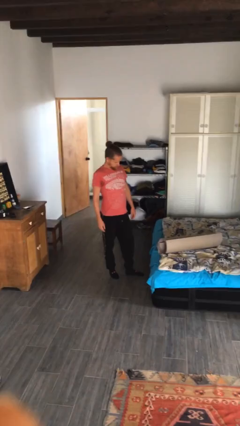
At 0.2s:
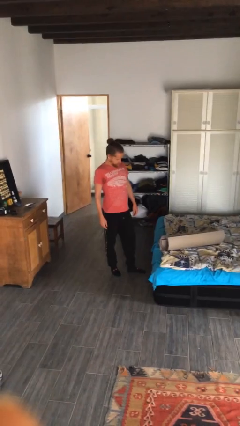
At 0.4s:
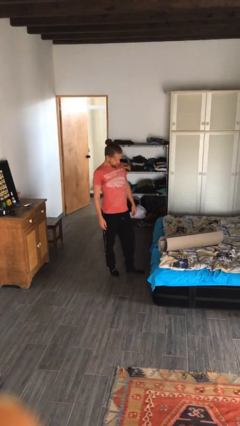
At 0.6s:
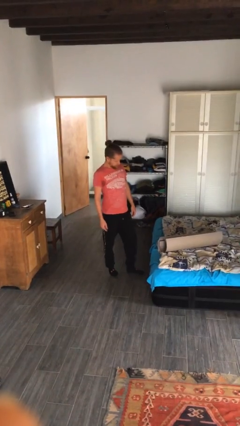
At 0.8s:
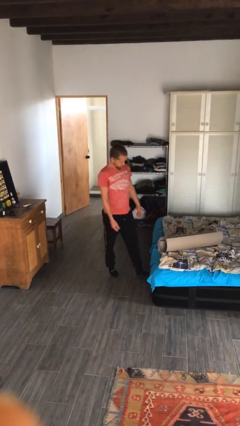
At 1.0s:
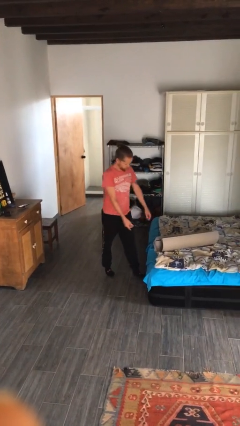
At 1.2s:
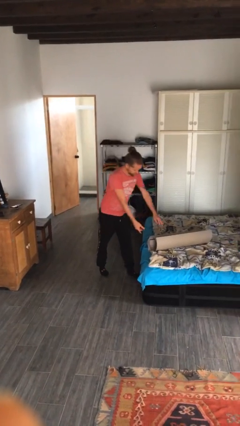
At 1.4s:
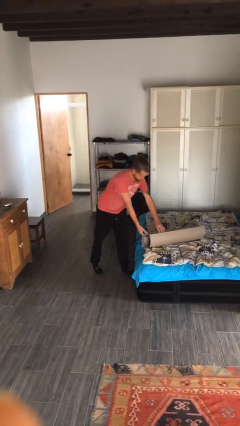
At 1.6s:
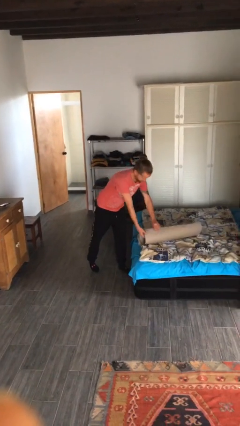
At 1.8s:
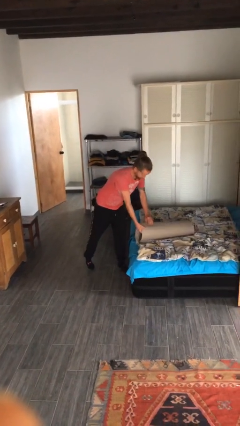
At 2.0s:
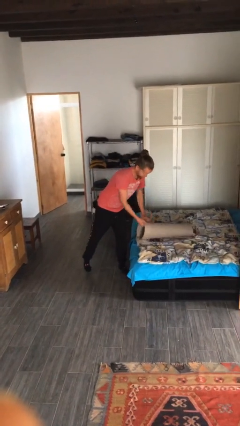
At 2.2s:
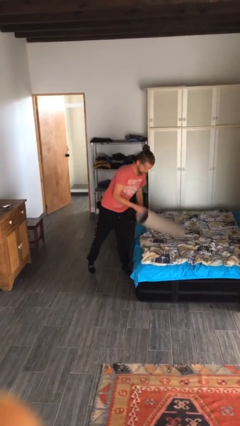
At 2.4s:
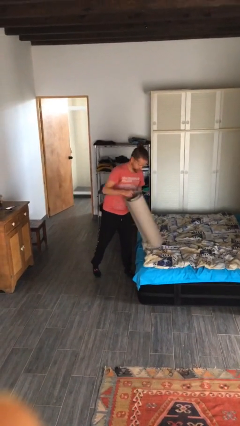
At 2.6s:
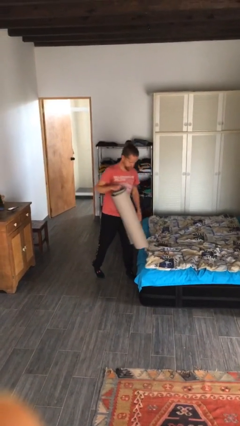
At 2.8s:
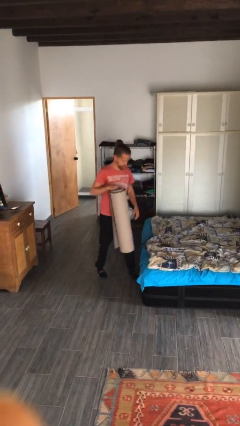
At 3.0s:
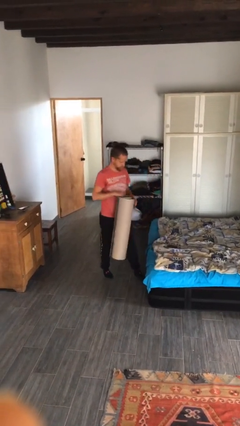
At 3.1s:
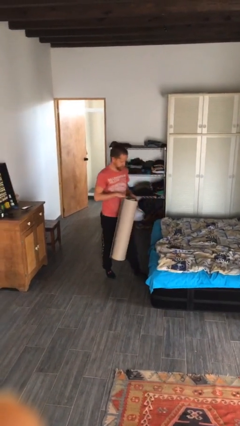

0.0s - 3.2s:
person picks up object from bed

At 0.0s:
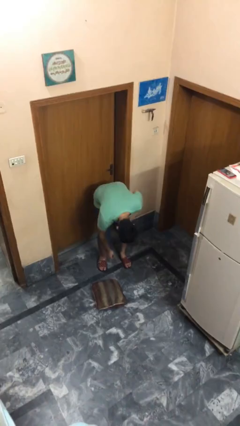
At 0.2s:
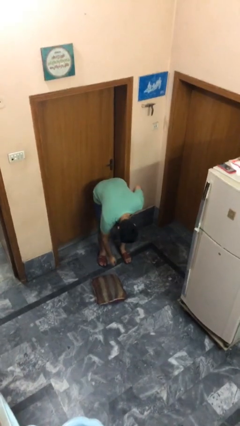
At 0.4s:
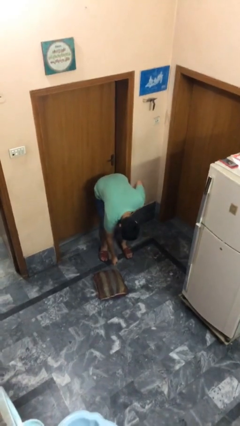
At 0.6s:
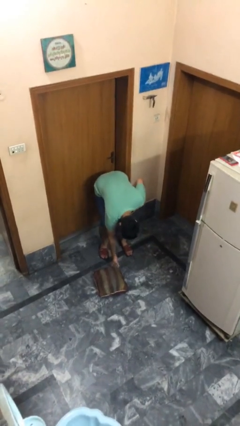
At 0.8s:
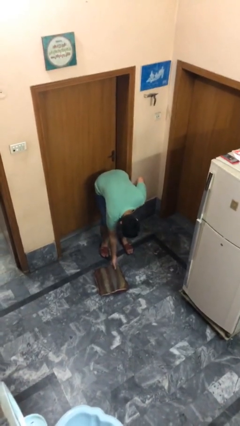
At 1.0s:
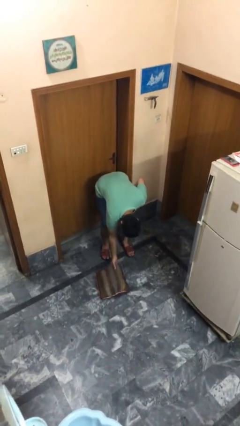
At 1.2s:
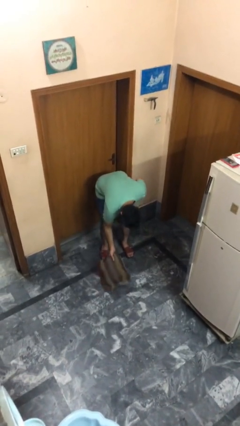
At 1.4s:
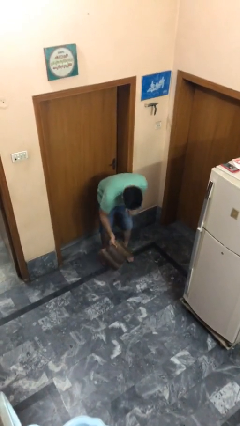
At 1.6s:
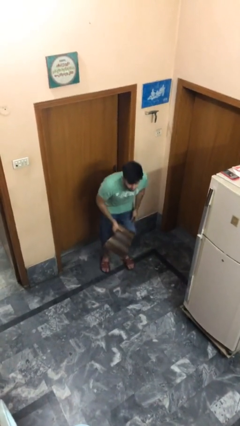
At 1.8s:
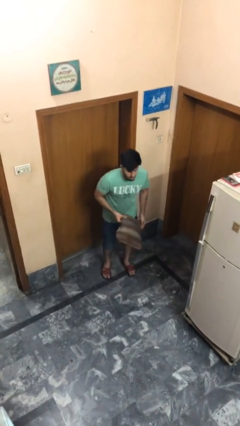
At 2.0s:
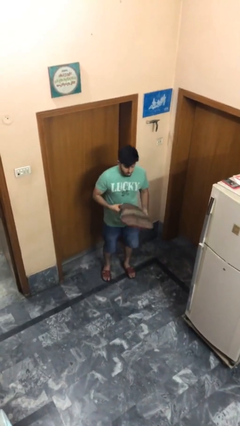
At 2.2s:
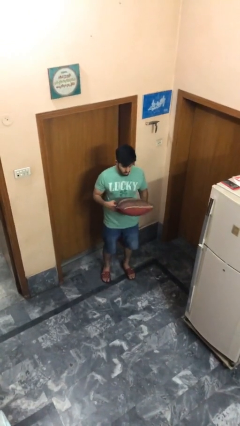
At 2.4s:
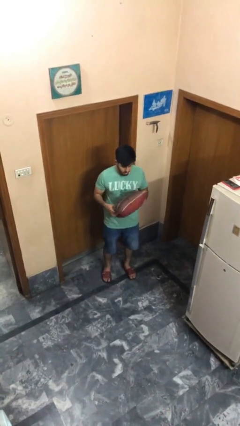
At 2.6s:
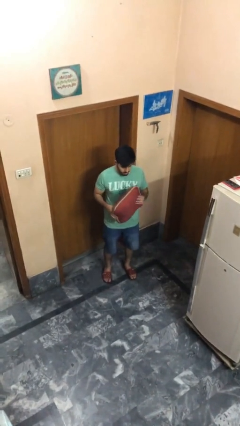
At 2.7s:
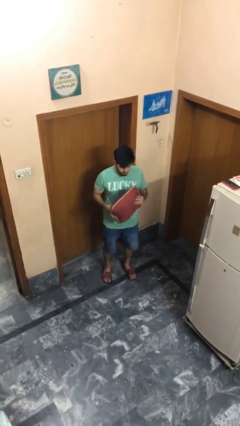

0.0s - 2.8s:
person picks up object from floor

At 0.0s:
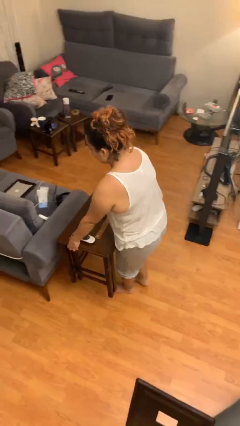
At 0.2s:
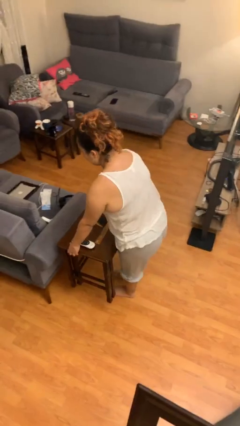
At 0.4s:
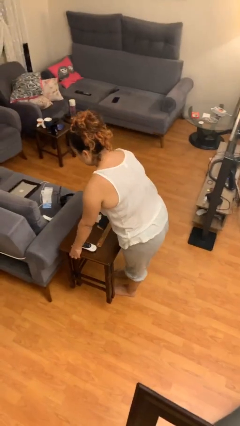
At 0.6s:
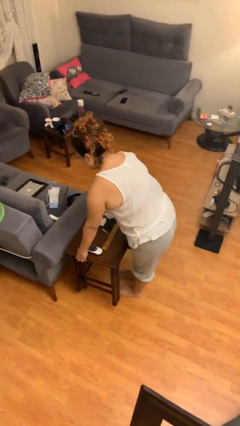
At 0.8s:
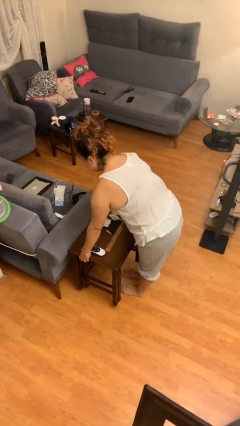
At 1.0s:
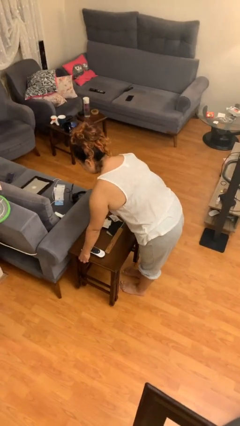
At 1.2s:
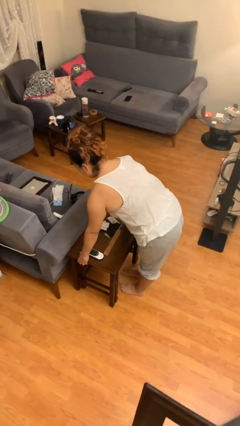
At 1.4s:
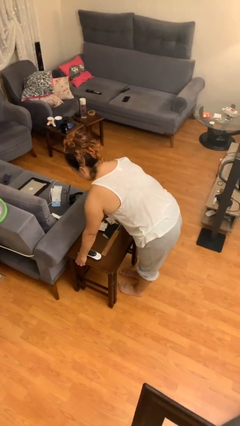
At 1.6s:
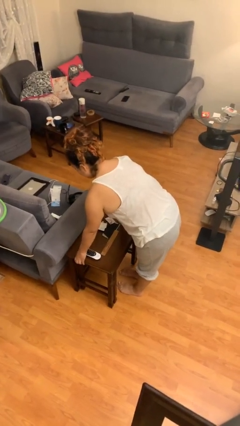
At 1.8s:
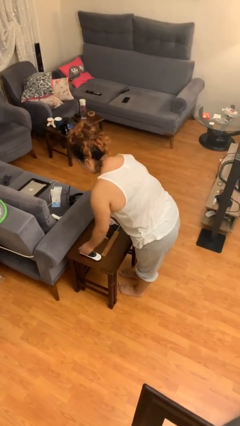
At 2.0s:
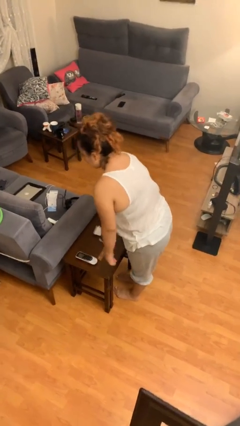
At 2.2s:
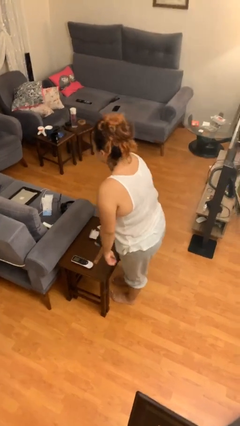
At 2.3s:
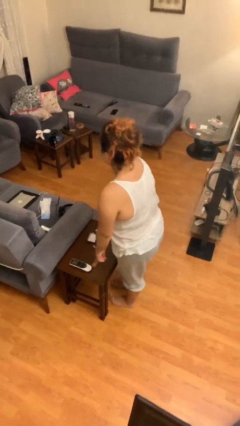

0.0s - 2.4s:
person puts down object on floor

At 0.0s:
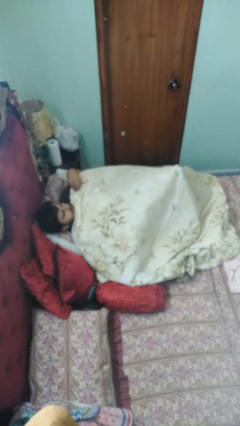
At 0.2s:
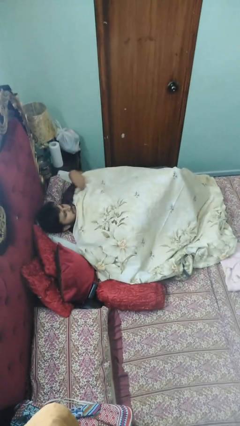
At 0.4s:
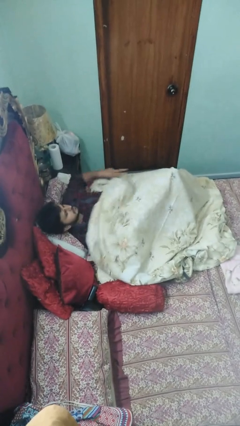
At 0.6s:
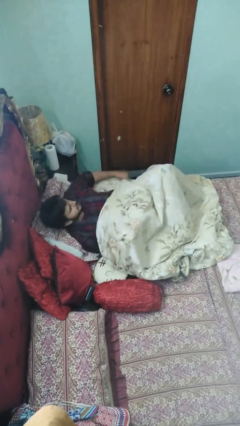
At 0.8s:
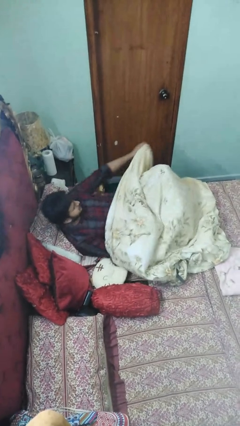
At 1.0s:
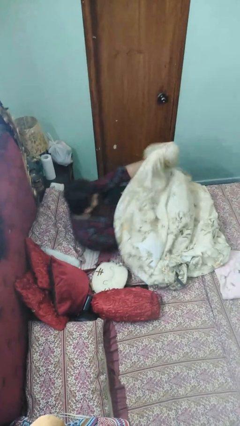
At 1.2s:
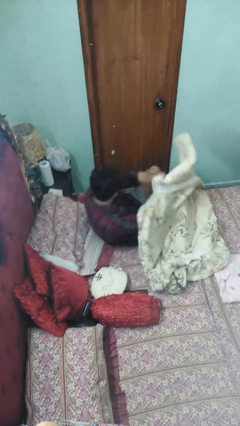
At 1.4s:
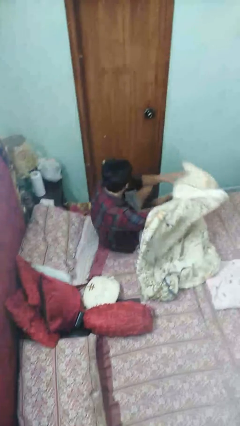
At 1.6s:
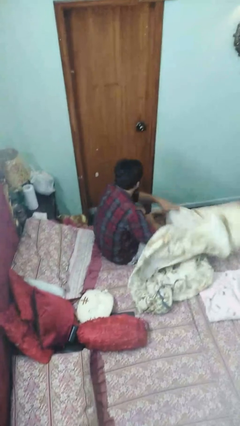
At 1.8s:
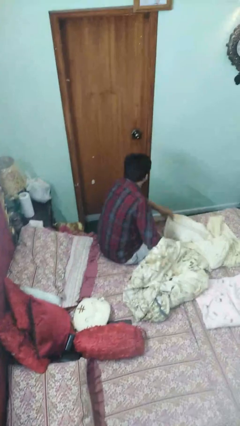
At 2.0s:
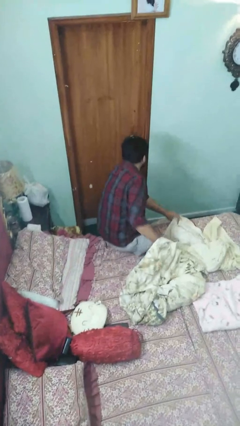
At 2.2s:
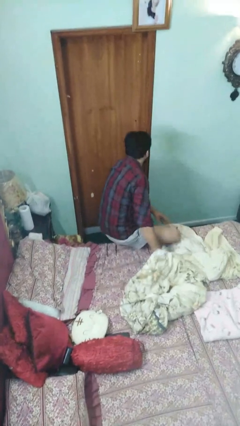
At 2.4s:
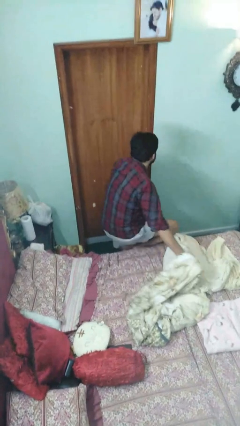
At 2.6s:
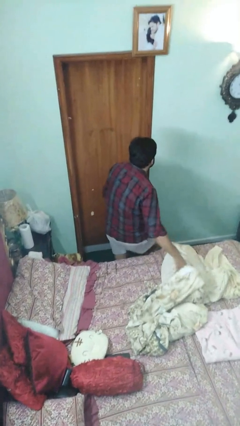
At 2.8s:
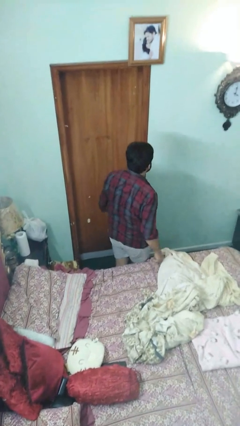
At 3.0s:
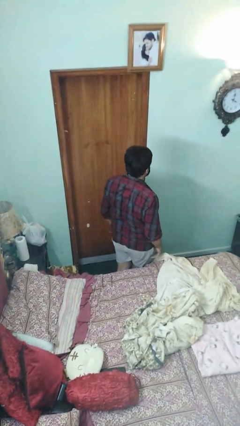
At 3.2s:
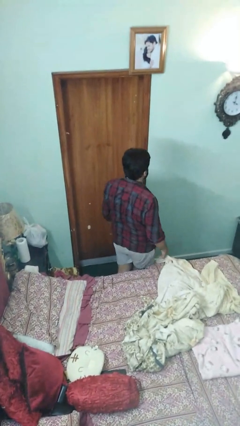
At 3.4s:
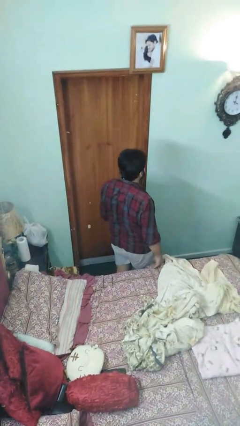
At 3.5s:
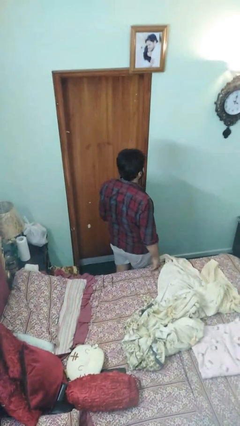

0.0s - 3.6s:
person uncovers with bedsheets

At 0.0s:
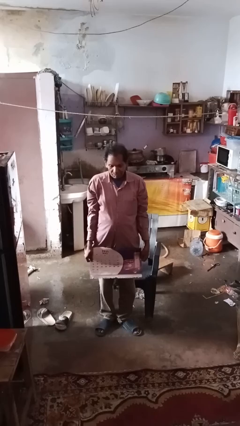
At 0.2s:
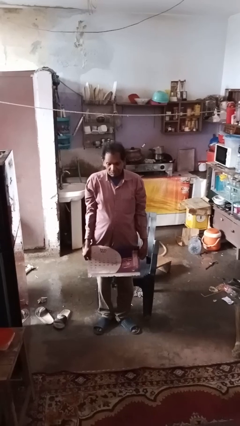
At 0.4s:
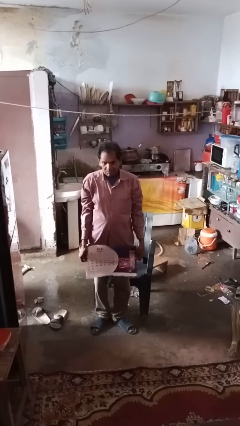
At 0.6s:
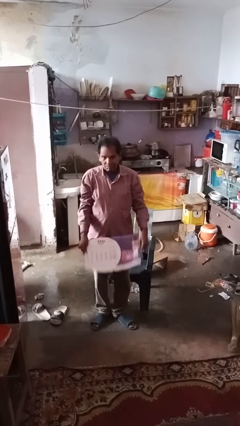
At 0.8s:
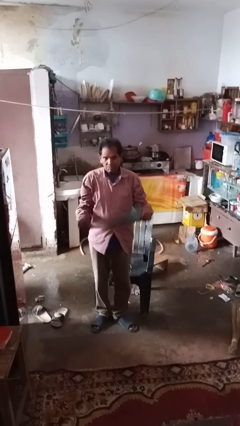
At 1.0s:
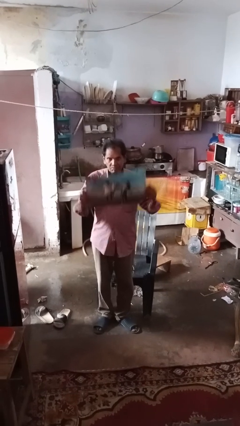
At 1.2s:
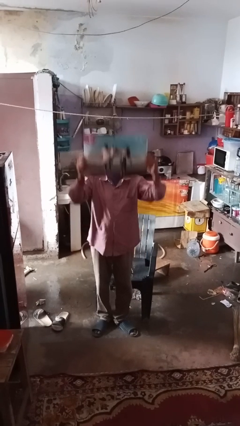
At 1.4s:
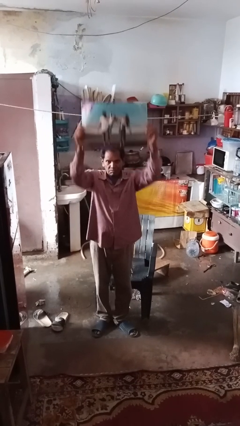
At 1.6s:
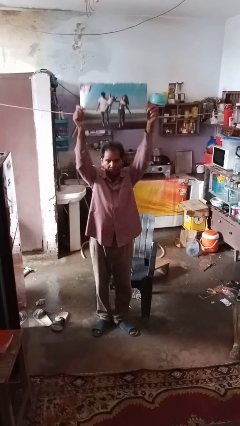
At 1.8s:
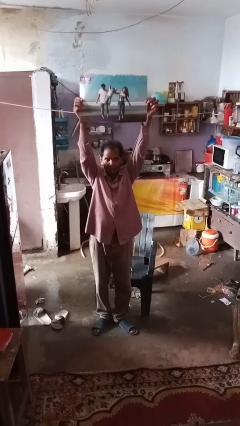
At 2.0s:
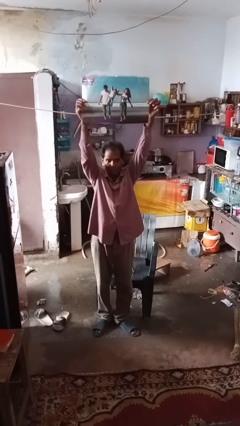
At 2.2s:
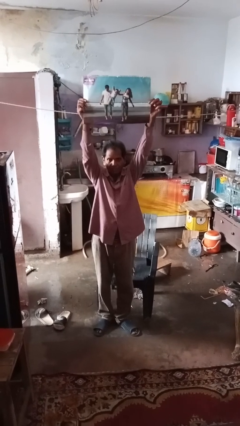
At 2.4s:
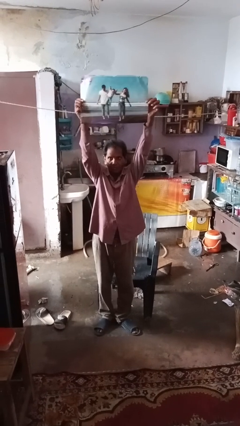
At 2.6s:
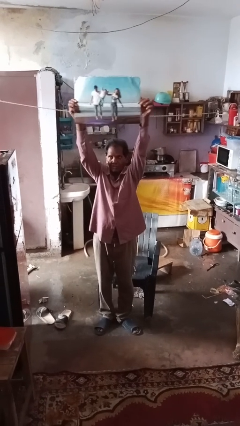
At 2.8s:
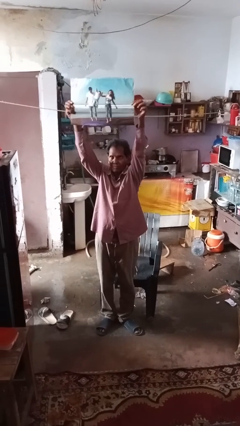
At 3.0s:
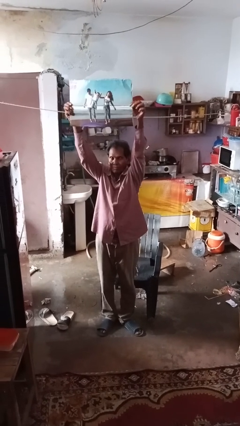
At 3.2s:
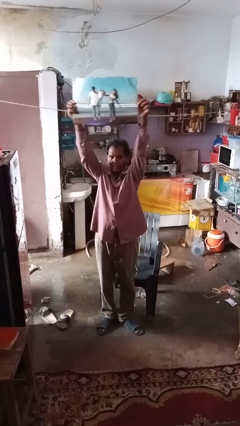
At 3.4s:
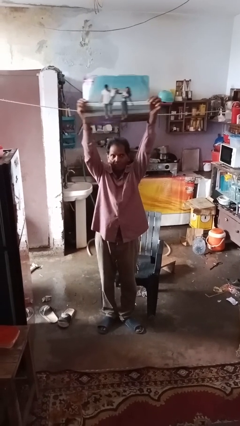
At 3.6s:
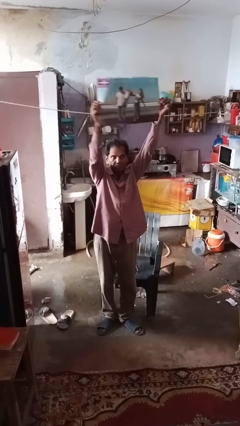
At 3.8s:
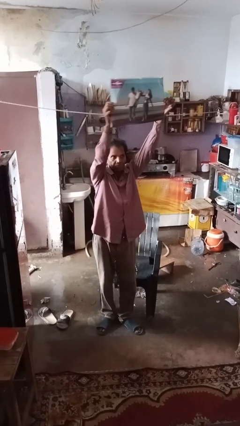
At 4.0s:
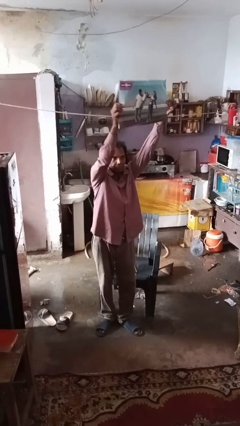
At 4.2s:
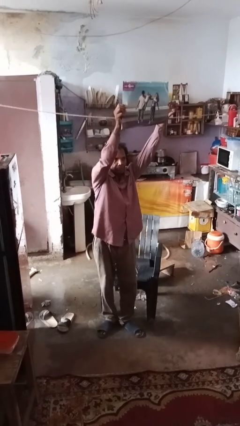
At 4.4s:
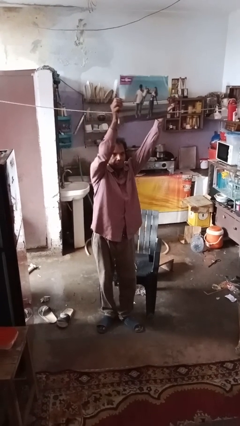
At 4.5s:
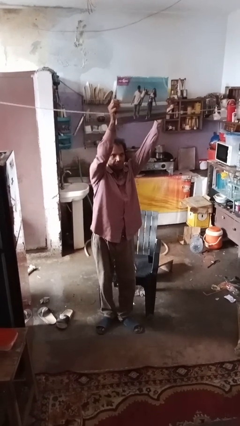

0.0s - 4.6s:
person holds object above head

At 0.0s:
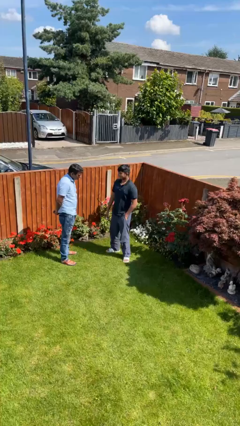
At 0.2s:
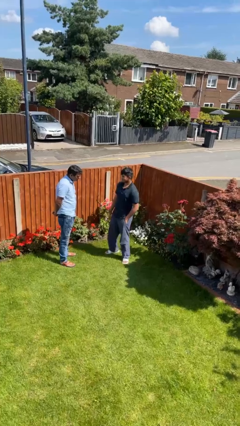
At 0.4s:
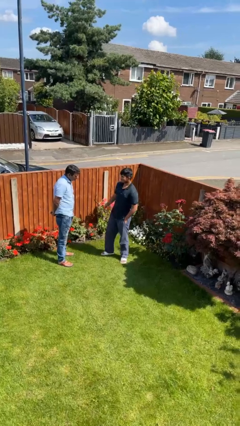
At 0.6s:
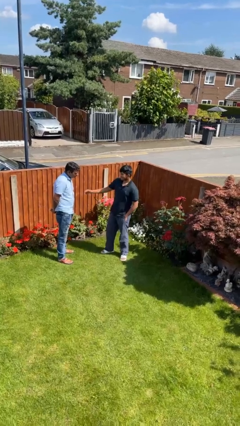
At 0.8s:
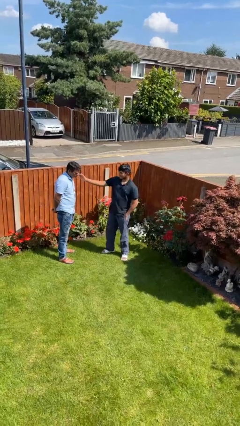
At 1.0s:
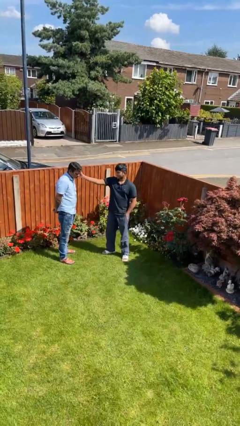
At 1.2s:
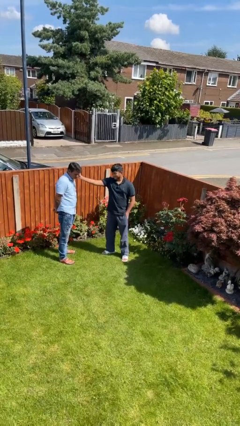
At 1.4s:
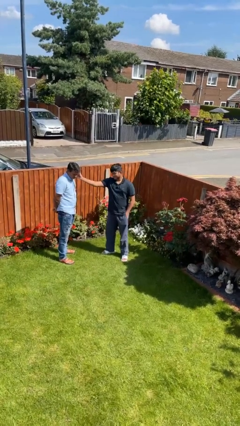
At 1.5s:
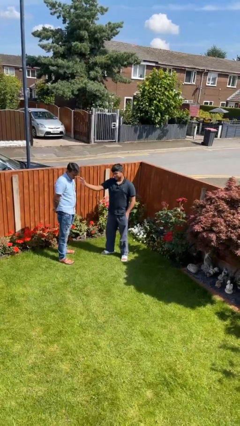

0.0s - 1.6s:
person touches face of person
